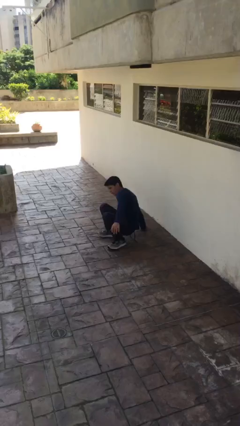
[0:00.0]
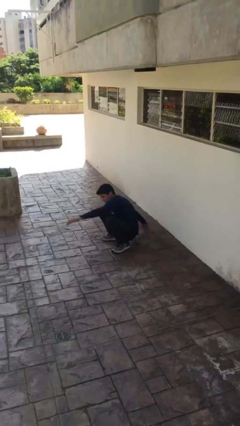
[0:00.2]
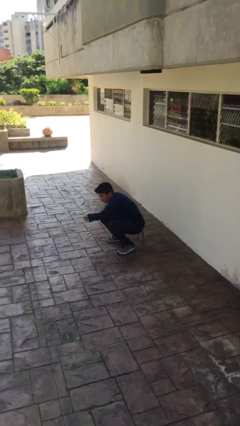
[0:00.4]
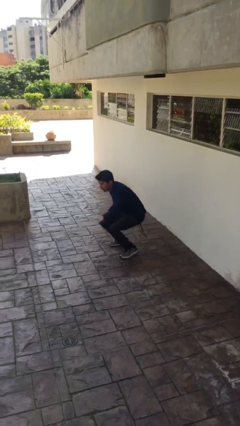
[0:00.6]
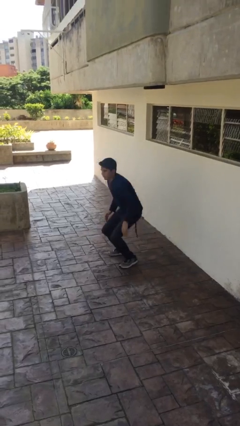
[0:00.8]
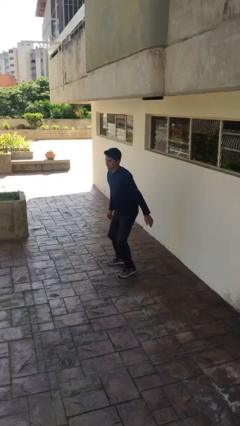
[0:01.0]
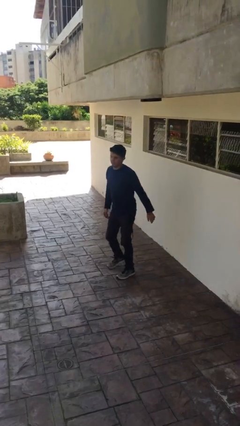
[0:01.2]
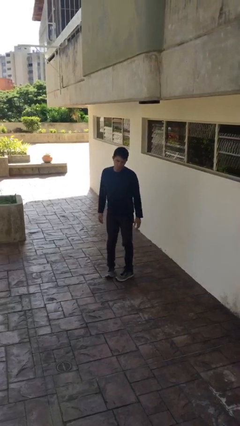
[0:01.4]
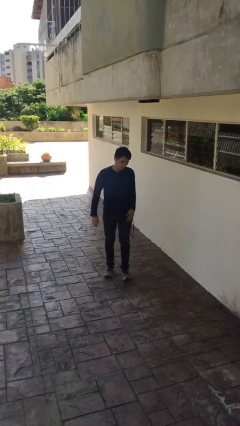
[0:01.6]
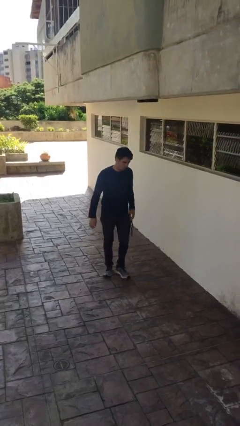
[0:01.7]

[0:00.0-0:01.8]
person stands up

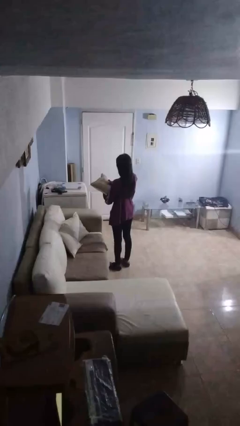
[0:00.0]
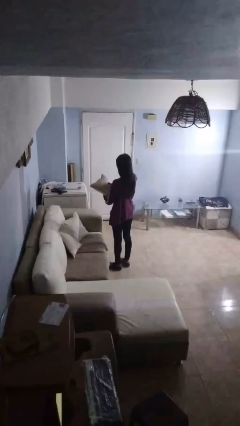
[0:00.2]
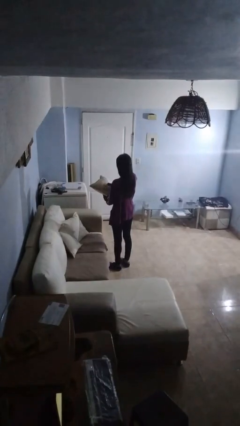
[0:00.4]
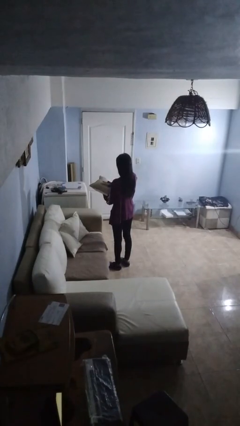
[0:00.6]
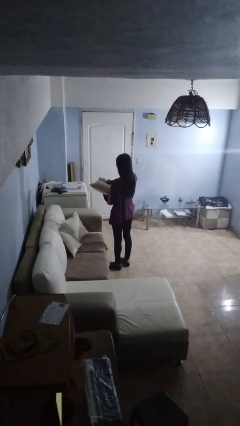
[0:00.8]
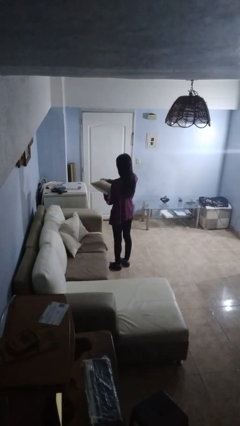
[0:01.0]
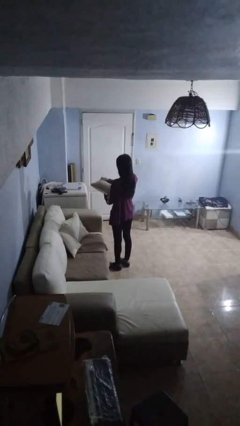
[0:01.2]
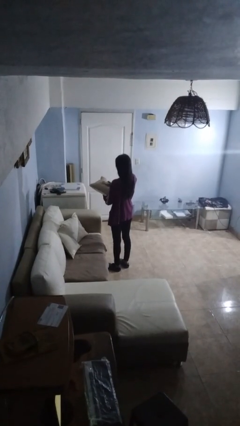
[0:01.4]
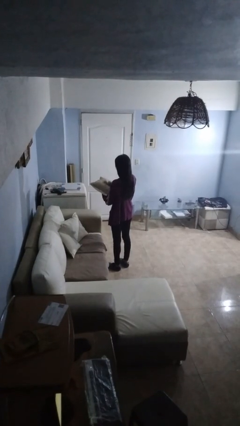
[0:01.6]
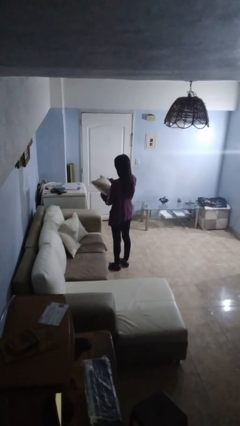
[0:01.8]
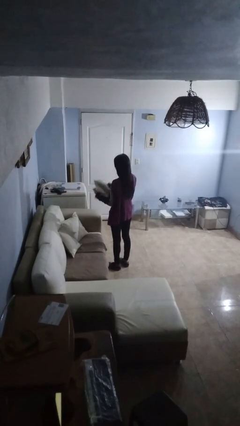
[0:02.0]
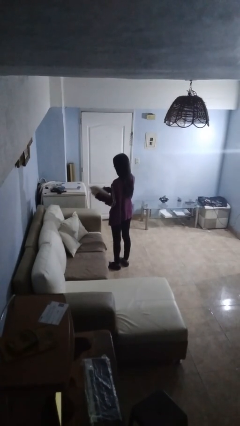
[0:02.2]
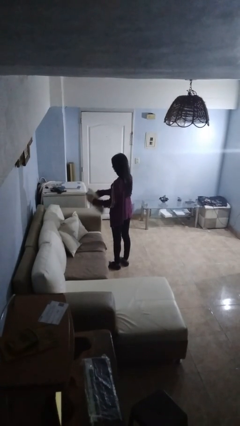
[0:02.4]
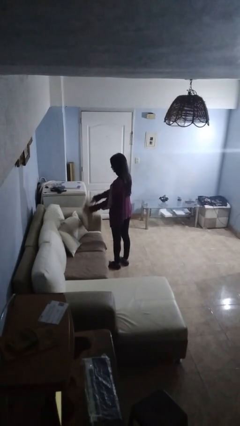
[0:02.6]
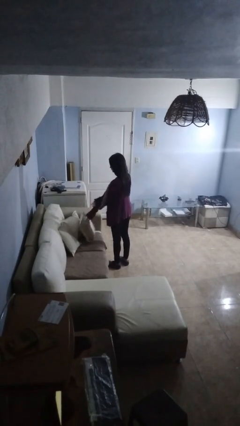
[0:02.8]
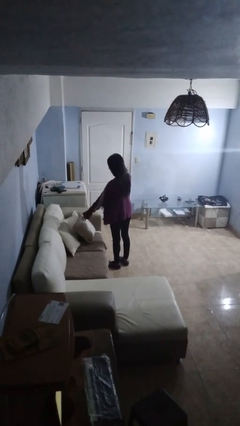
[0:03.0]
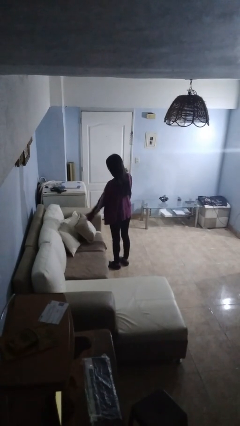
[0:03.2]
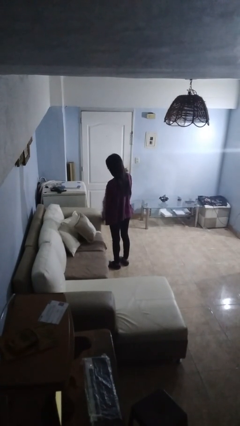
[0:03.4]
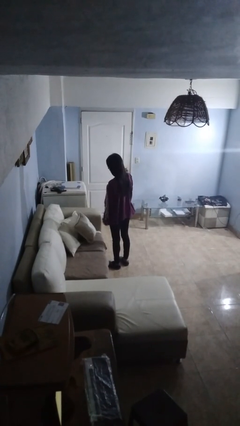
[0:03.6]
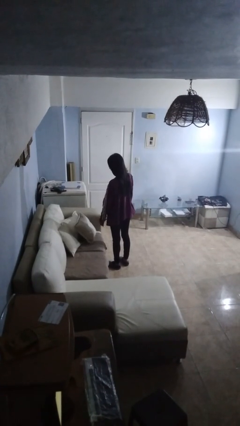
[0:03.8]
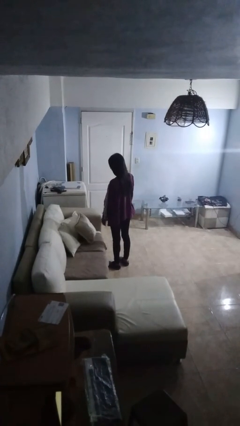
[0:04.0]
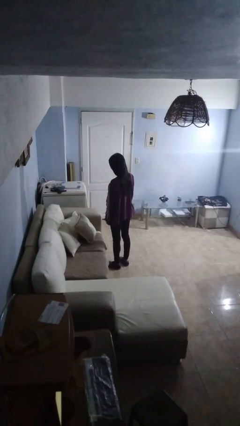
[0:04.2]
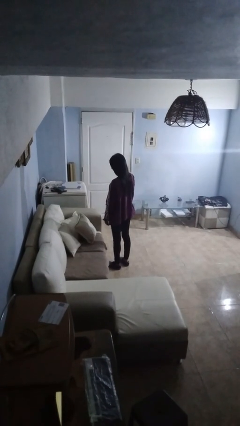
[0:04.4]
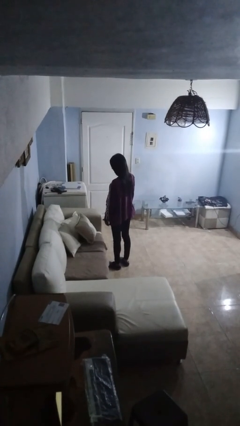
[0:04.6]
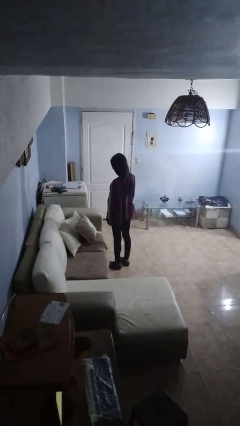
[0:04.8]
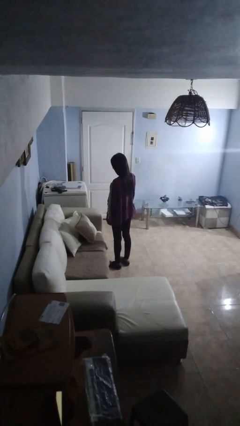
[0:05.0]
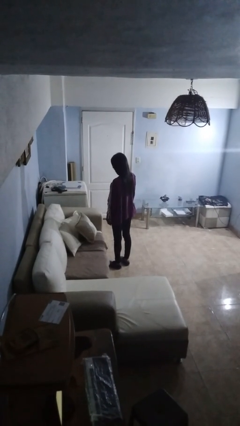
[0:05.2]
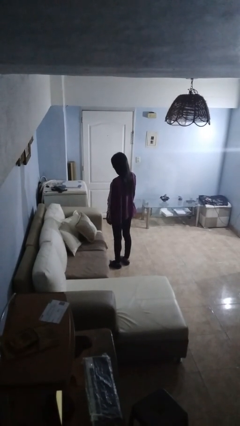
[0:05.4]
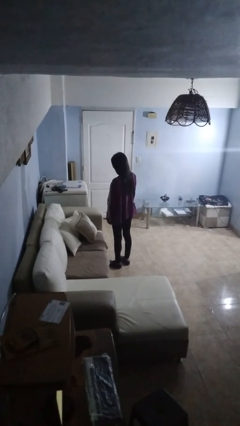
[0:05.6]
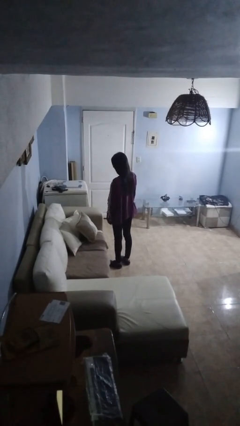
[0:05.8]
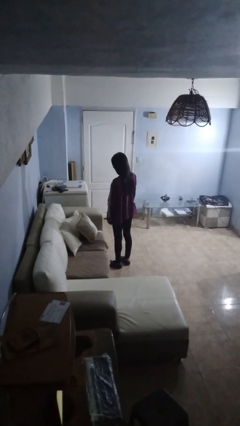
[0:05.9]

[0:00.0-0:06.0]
person picks up object from couch

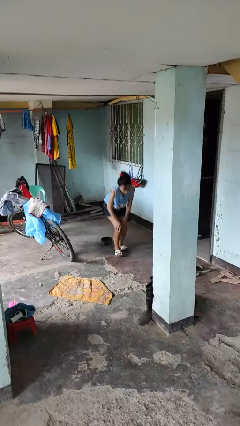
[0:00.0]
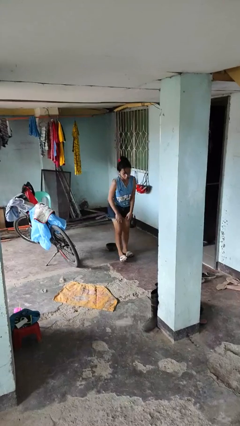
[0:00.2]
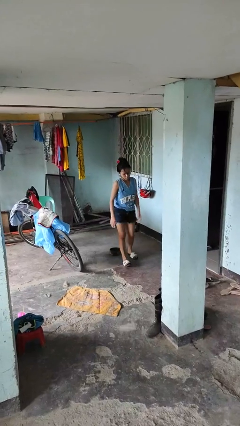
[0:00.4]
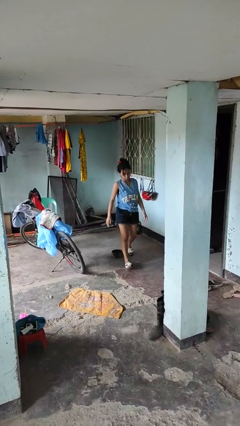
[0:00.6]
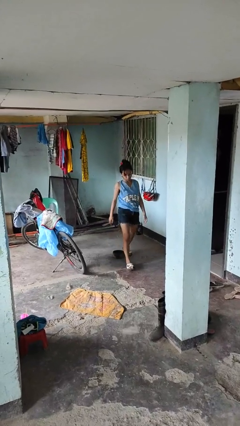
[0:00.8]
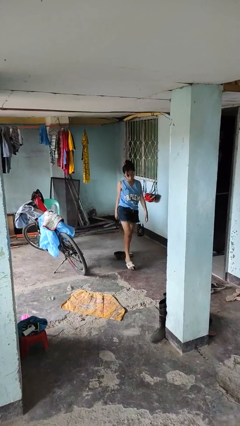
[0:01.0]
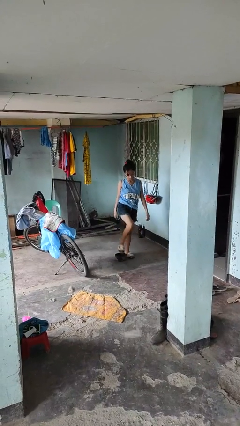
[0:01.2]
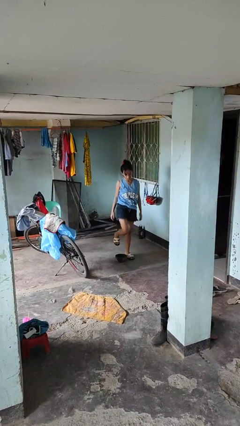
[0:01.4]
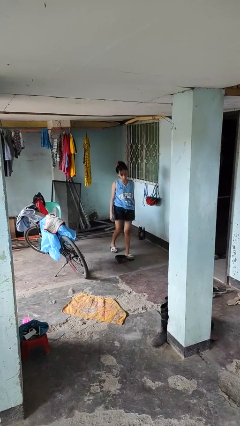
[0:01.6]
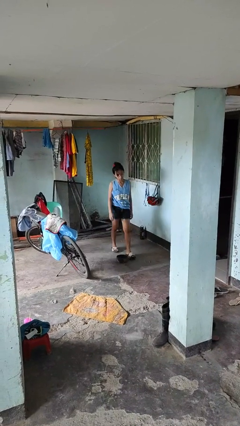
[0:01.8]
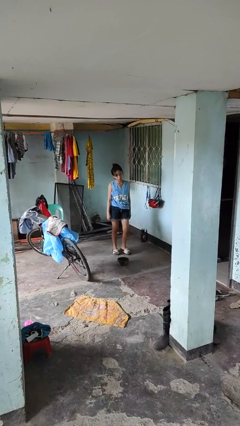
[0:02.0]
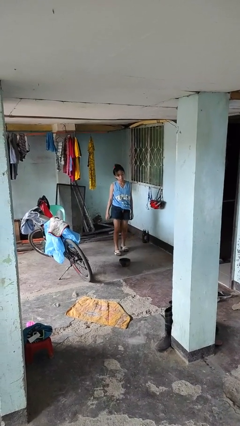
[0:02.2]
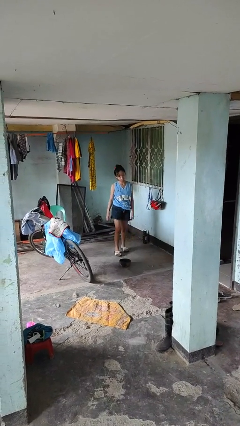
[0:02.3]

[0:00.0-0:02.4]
person stands up from floor

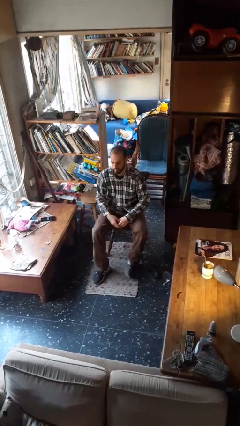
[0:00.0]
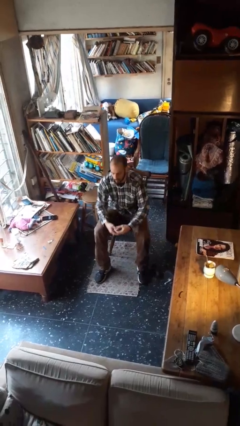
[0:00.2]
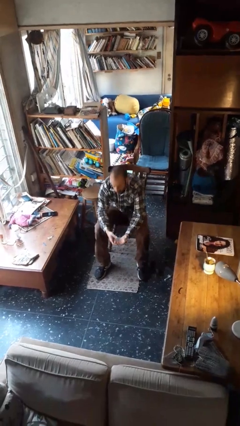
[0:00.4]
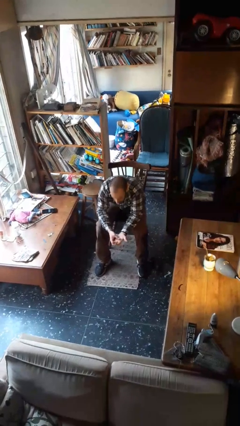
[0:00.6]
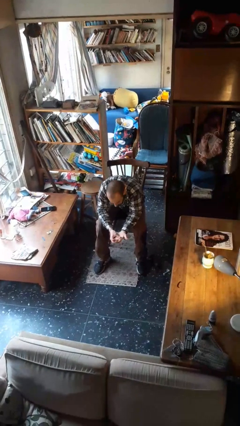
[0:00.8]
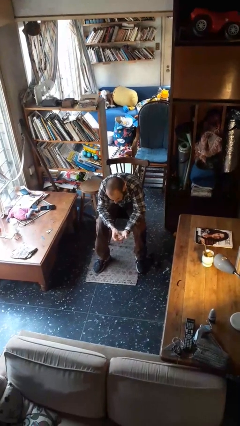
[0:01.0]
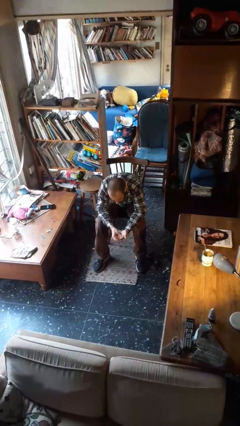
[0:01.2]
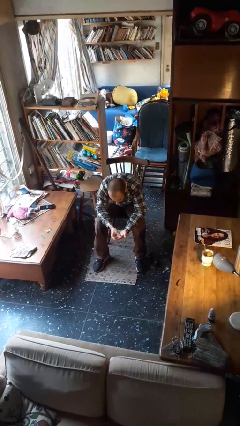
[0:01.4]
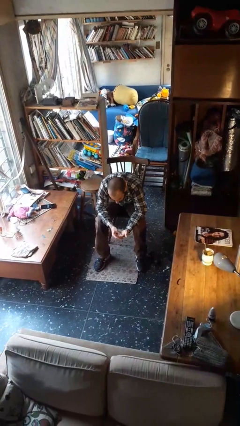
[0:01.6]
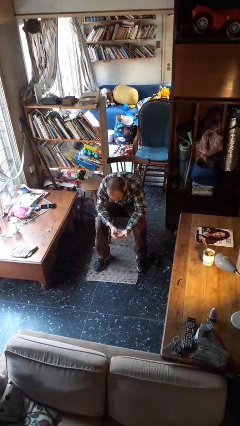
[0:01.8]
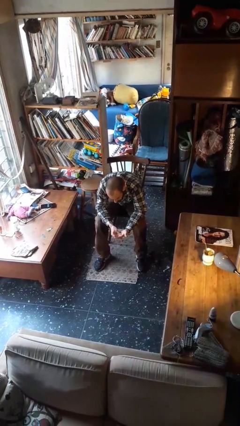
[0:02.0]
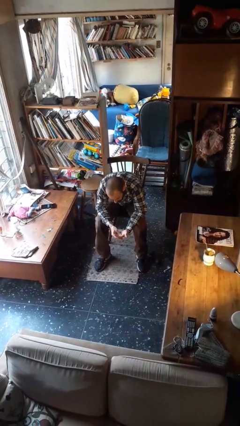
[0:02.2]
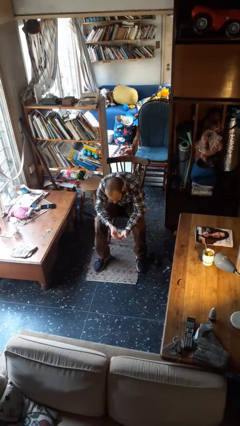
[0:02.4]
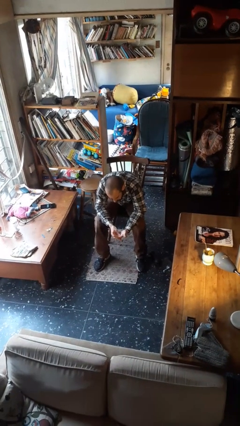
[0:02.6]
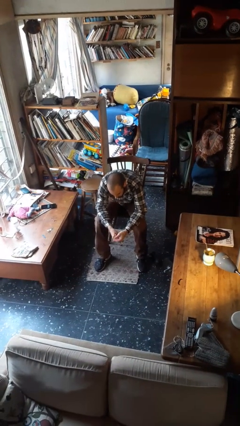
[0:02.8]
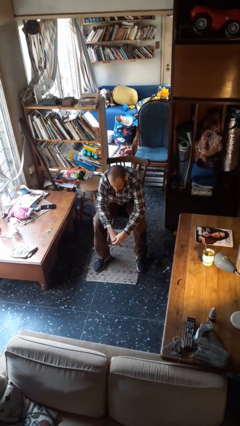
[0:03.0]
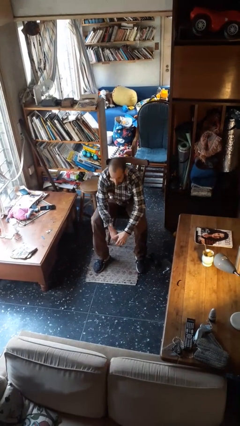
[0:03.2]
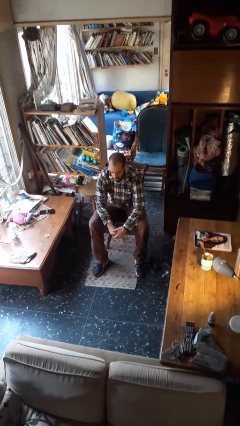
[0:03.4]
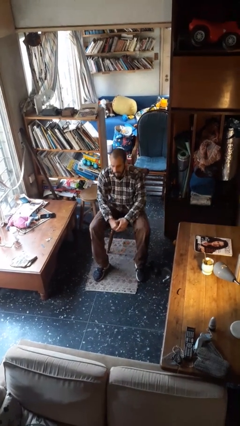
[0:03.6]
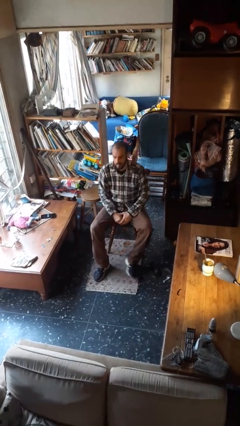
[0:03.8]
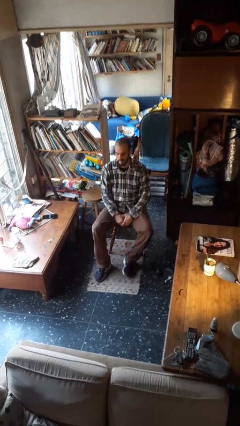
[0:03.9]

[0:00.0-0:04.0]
person looks at hands in lap

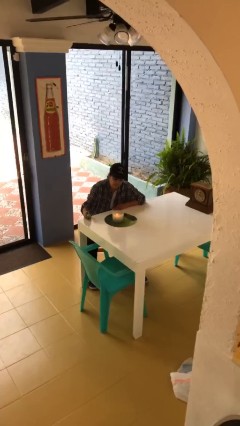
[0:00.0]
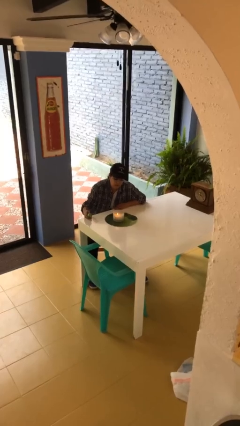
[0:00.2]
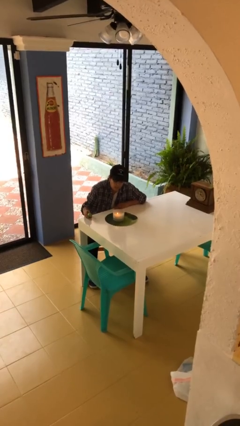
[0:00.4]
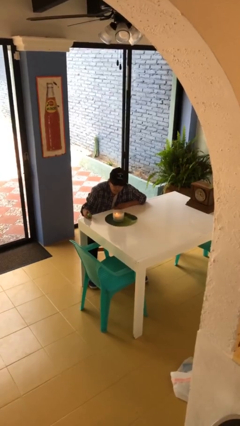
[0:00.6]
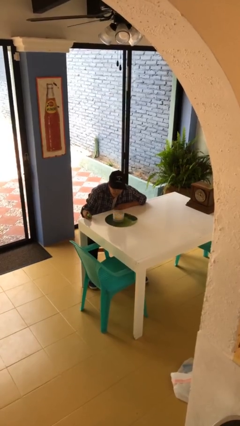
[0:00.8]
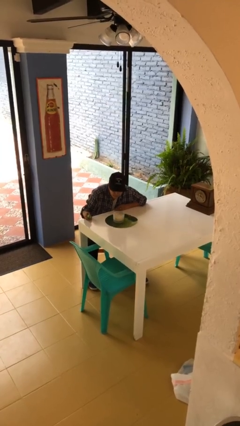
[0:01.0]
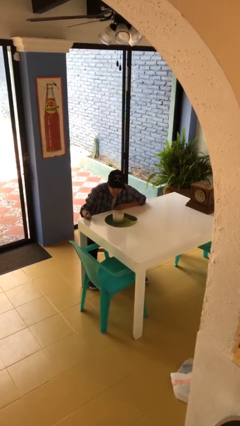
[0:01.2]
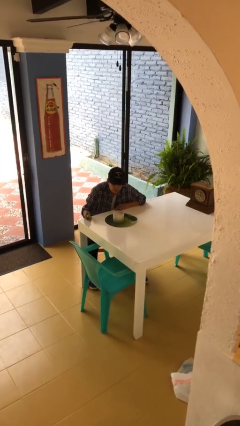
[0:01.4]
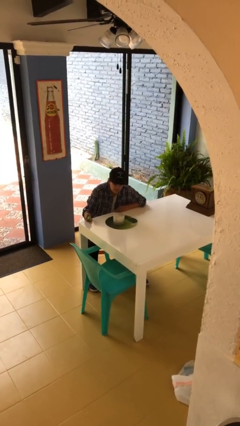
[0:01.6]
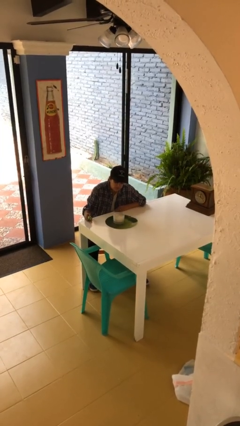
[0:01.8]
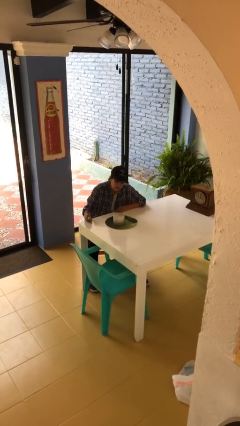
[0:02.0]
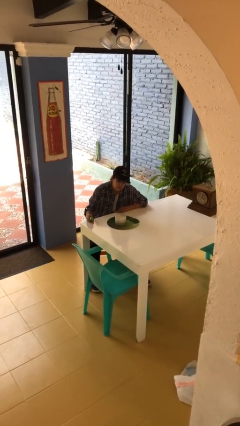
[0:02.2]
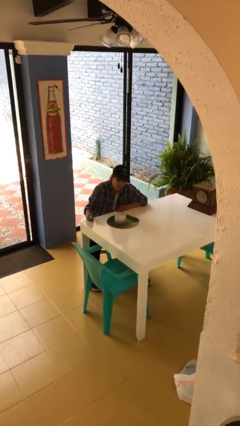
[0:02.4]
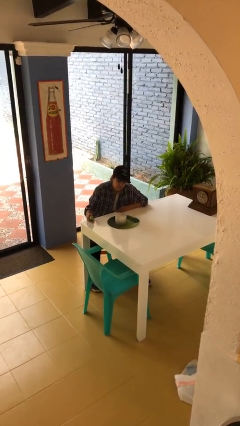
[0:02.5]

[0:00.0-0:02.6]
person extinguishes candle

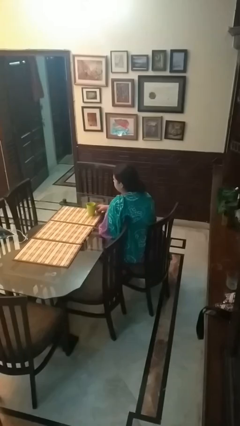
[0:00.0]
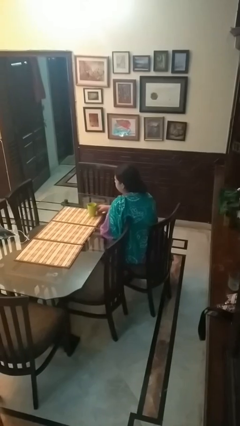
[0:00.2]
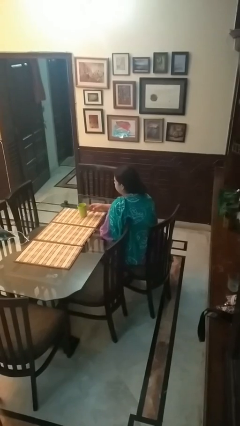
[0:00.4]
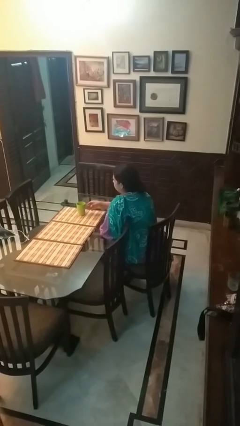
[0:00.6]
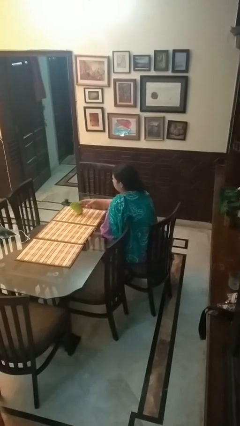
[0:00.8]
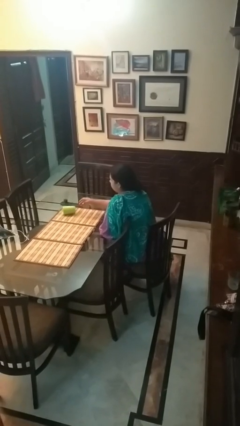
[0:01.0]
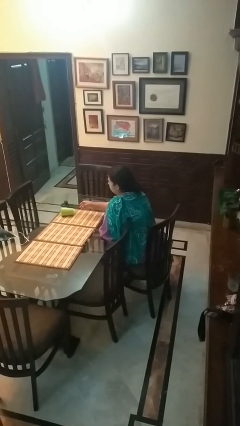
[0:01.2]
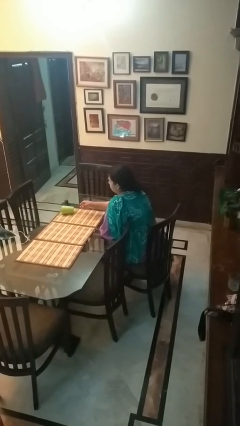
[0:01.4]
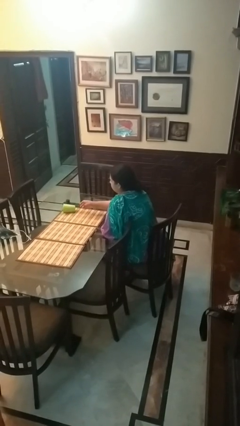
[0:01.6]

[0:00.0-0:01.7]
person knocks over glass
